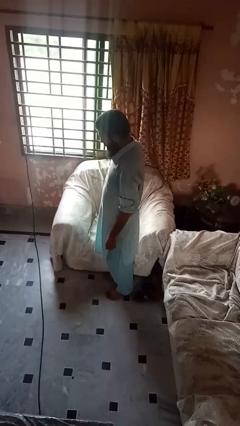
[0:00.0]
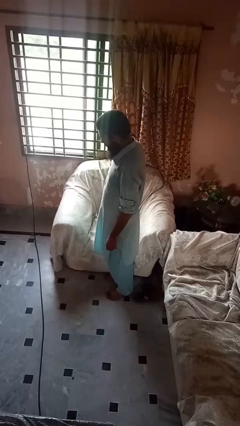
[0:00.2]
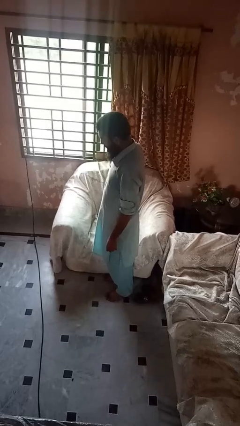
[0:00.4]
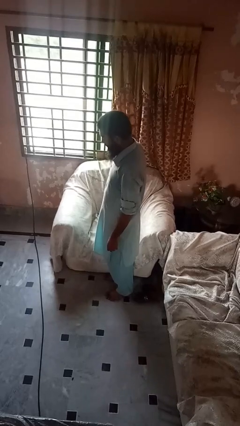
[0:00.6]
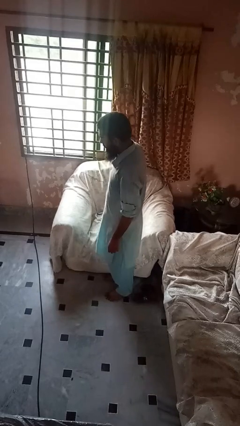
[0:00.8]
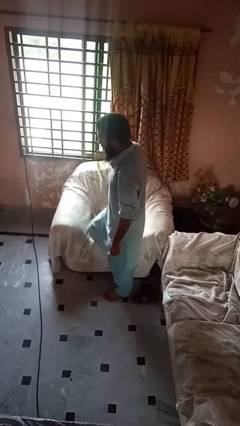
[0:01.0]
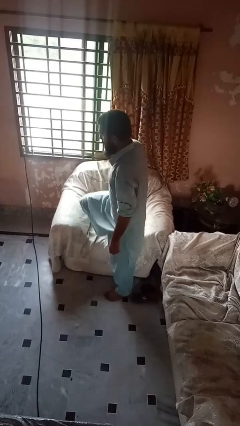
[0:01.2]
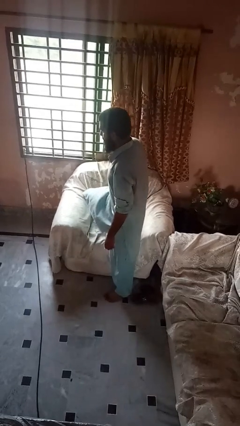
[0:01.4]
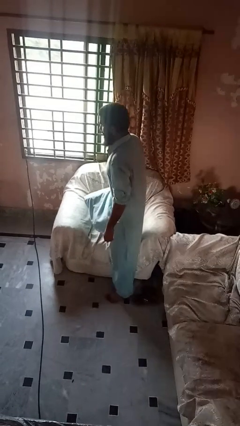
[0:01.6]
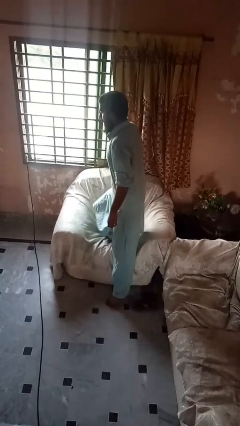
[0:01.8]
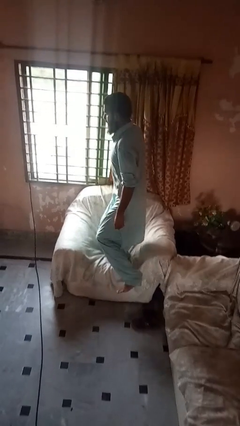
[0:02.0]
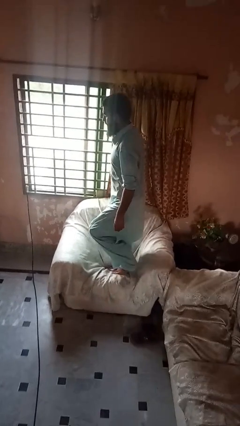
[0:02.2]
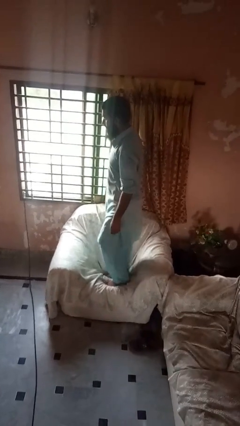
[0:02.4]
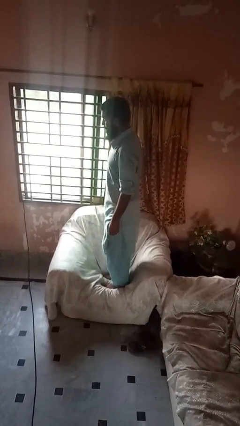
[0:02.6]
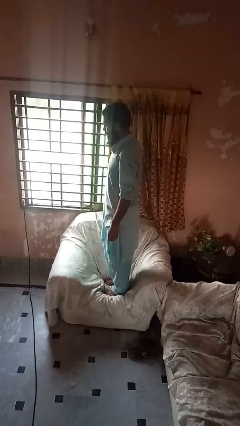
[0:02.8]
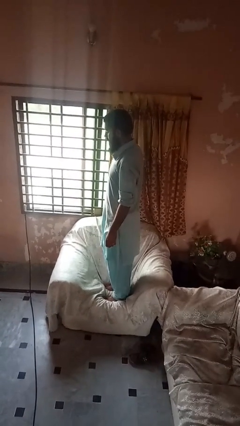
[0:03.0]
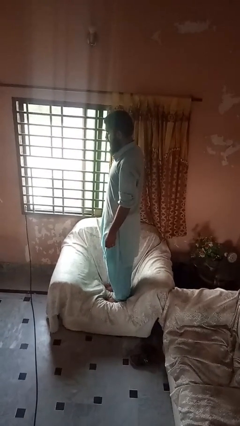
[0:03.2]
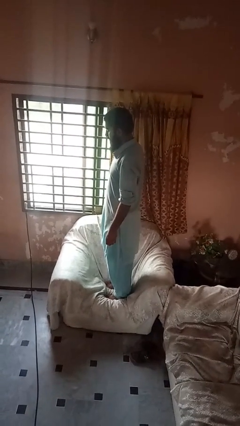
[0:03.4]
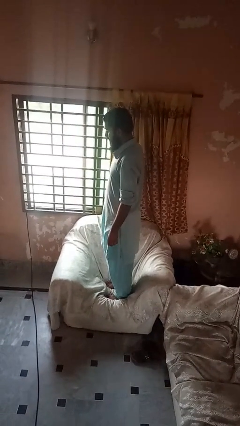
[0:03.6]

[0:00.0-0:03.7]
person climbs on couch

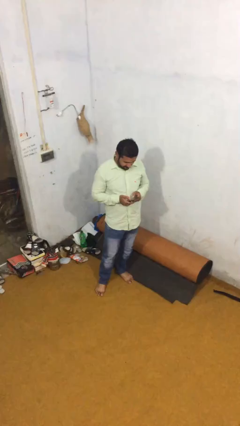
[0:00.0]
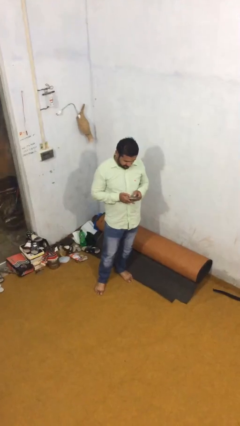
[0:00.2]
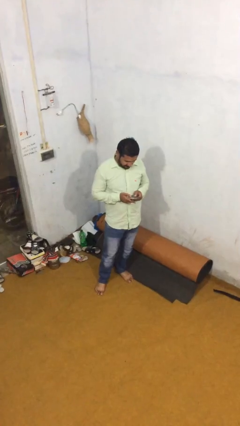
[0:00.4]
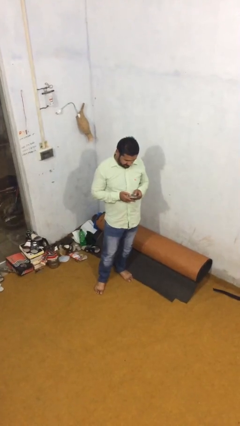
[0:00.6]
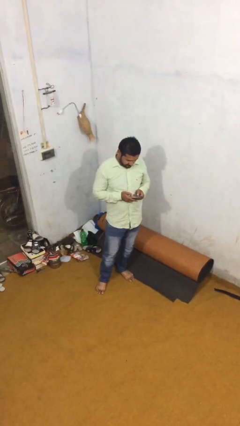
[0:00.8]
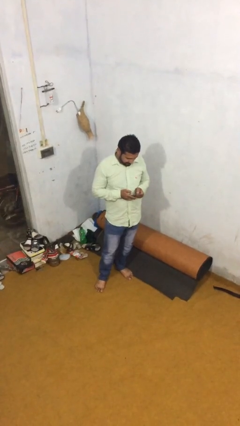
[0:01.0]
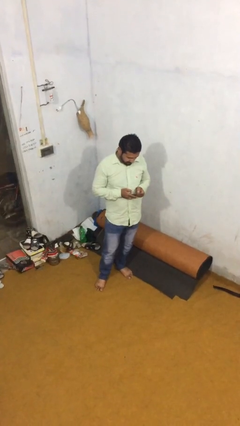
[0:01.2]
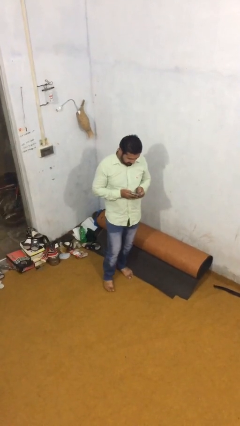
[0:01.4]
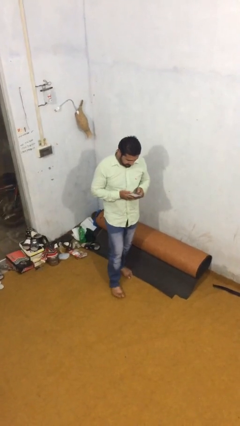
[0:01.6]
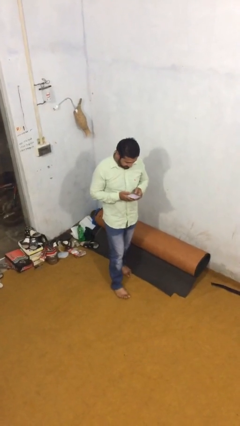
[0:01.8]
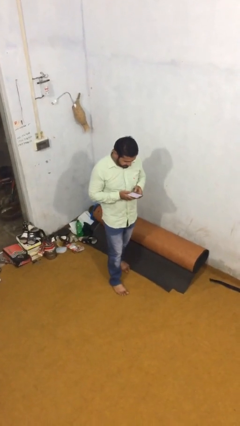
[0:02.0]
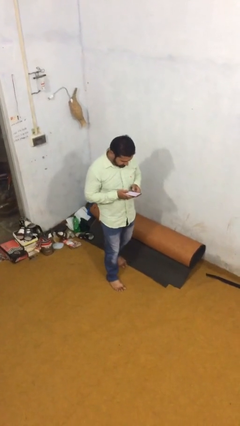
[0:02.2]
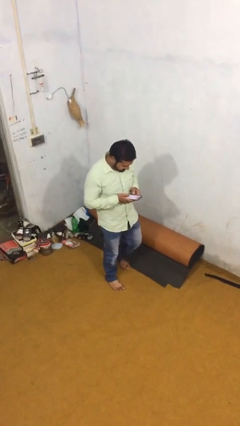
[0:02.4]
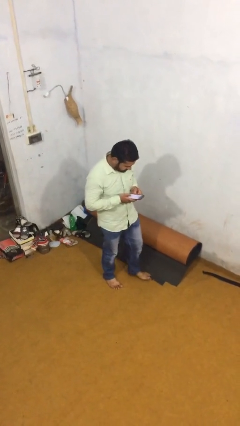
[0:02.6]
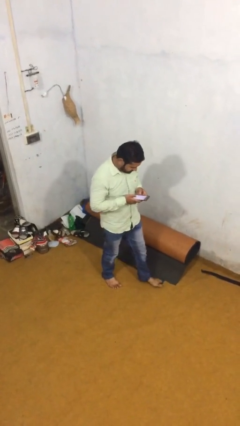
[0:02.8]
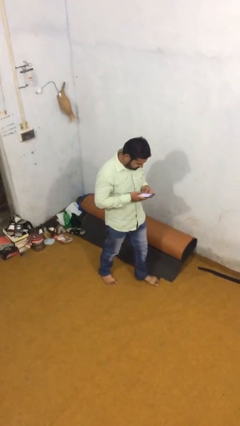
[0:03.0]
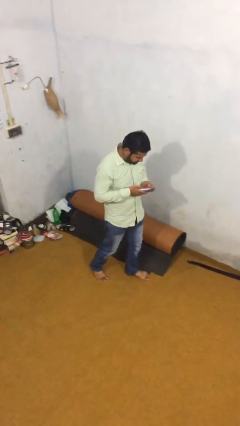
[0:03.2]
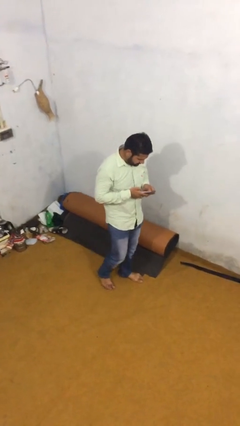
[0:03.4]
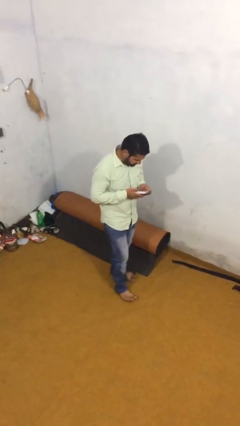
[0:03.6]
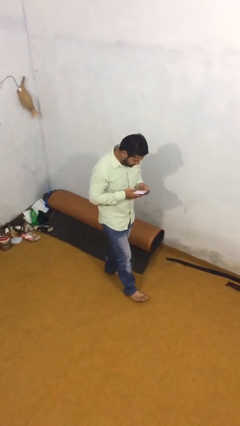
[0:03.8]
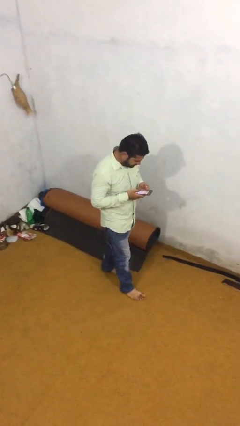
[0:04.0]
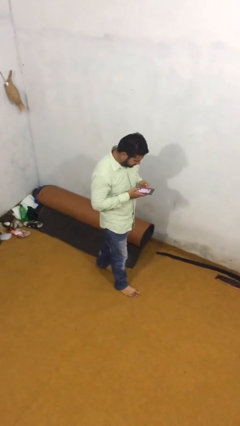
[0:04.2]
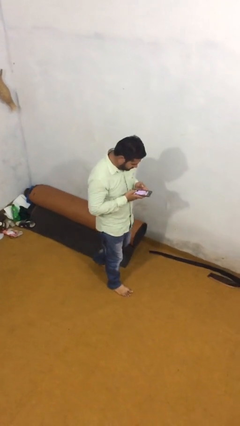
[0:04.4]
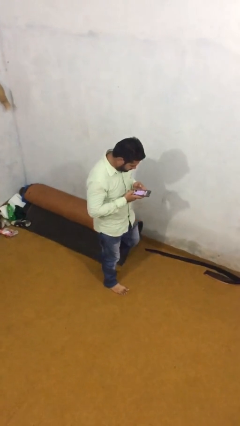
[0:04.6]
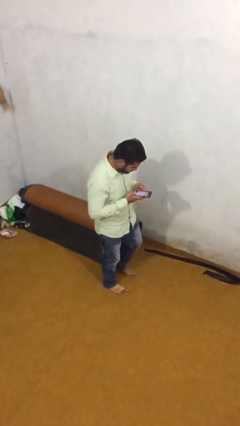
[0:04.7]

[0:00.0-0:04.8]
person texts on phone

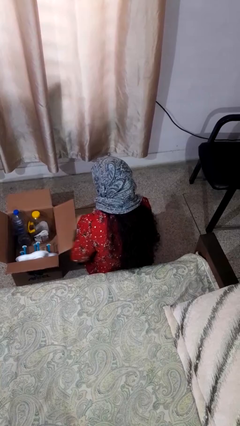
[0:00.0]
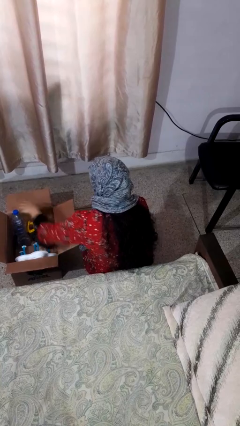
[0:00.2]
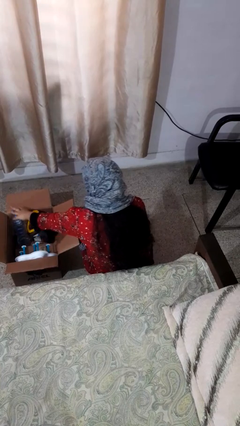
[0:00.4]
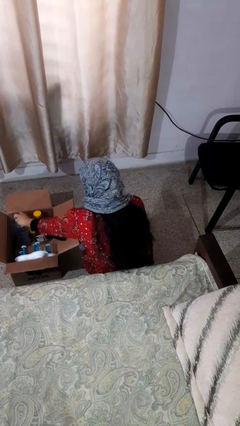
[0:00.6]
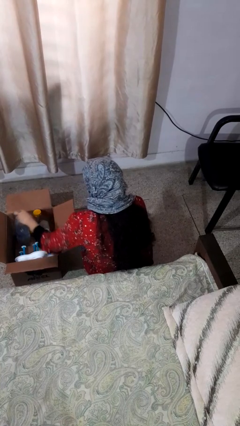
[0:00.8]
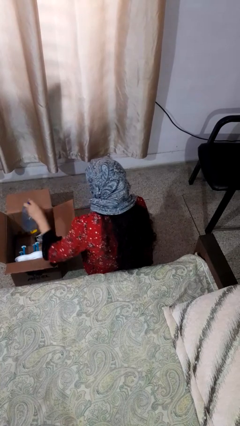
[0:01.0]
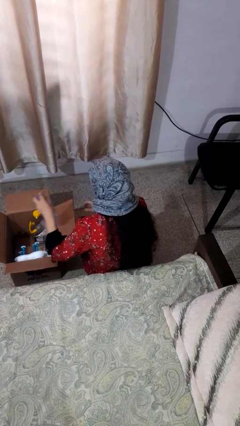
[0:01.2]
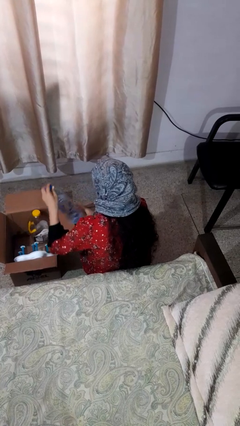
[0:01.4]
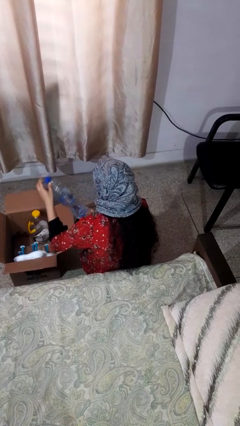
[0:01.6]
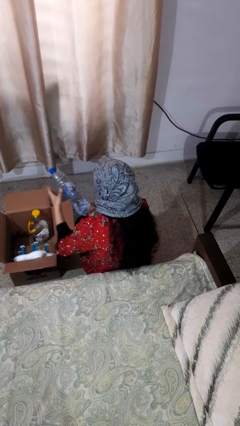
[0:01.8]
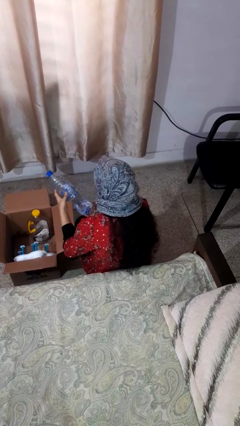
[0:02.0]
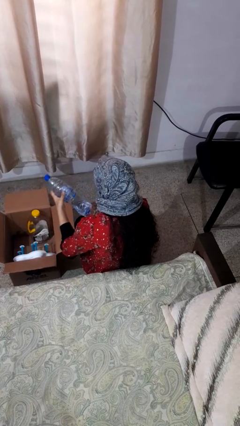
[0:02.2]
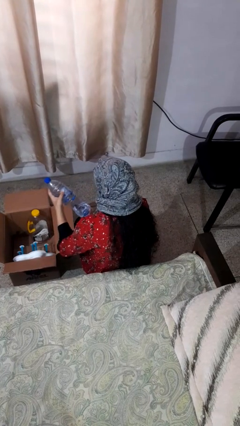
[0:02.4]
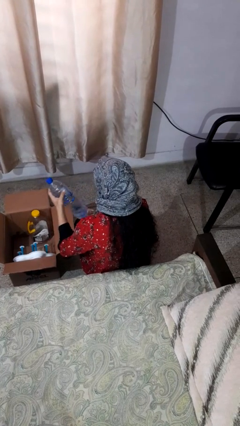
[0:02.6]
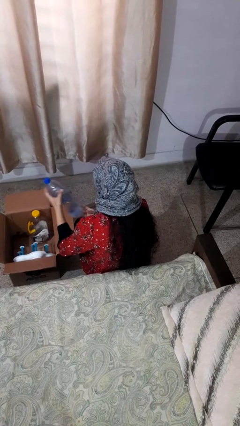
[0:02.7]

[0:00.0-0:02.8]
person takes object from box

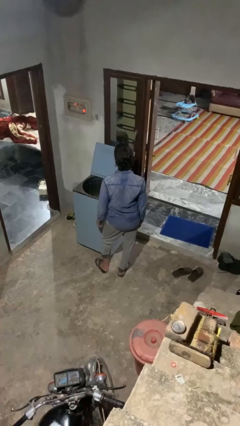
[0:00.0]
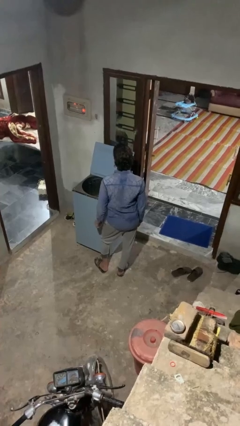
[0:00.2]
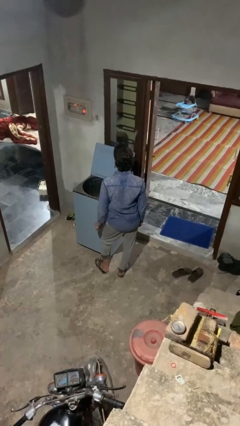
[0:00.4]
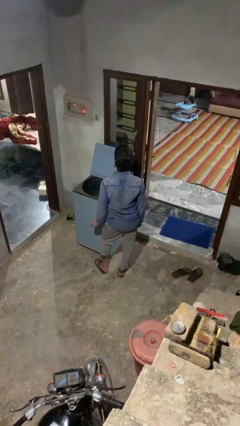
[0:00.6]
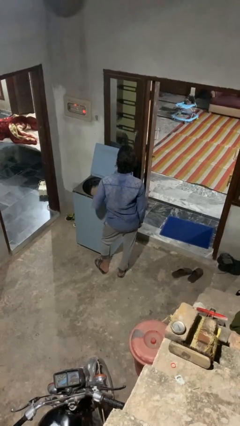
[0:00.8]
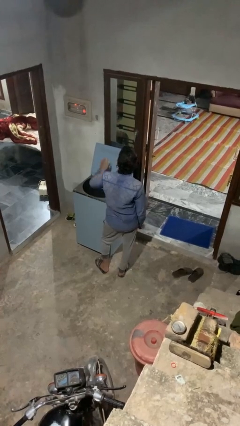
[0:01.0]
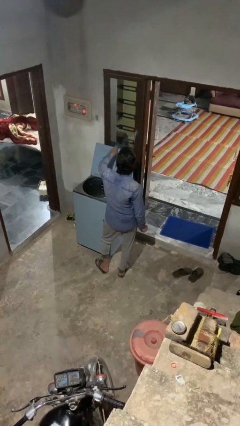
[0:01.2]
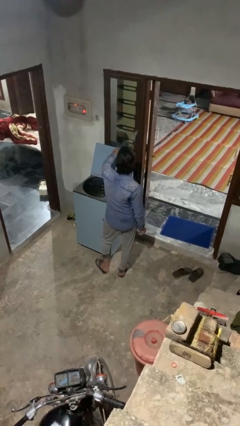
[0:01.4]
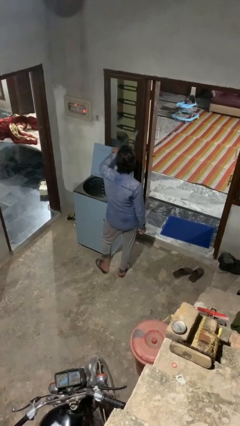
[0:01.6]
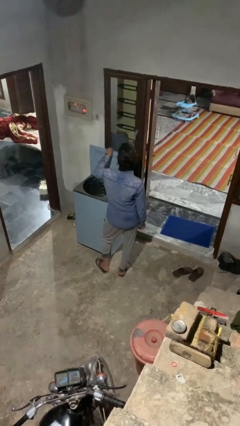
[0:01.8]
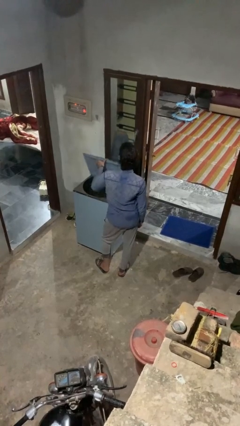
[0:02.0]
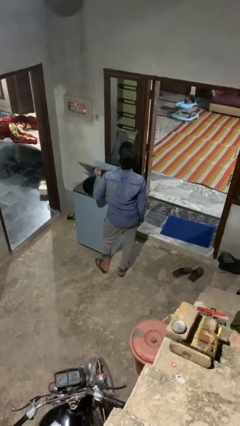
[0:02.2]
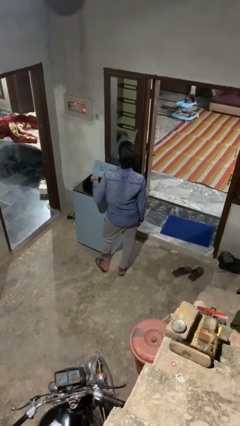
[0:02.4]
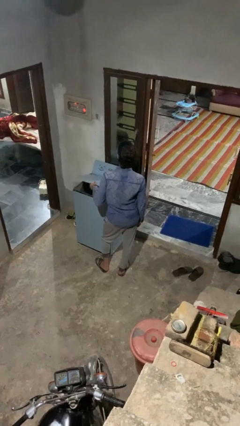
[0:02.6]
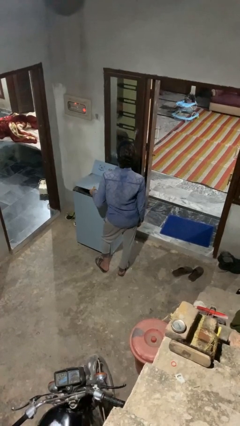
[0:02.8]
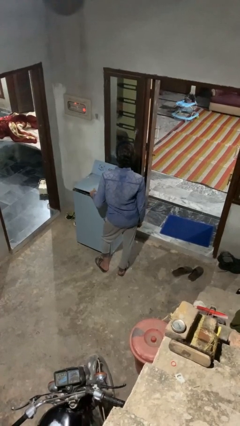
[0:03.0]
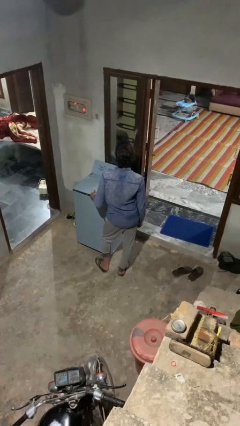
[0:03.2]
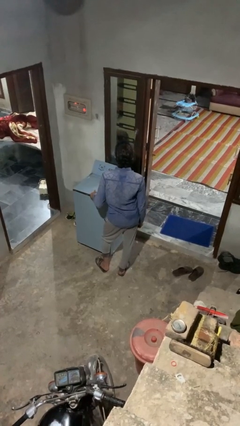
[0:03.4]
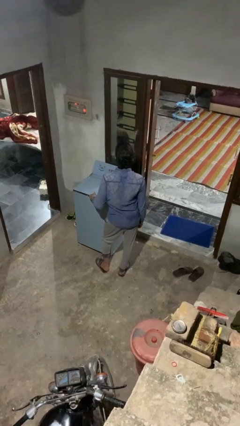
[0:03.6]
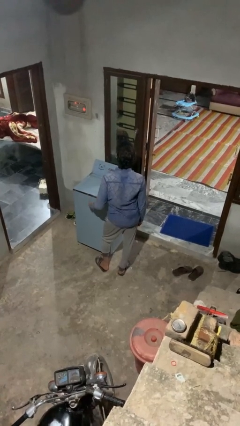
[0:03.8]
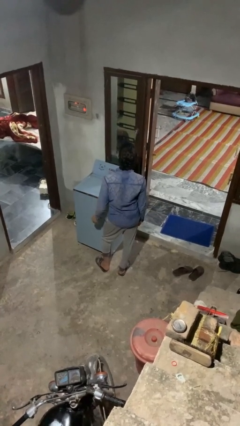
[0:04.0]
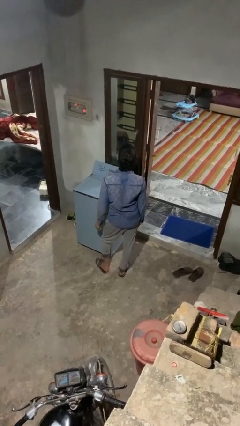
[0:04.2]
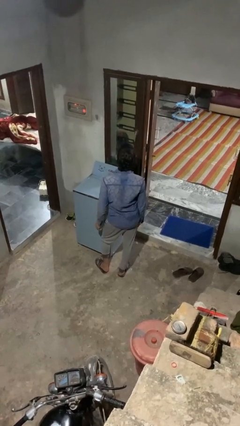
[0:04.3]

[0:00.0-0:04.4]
person closes clothes washer

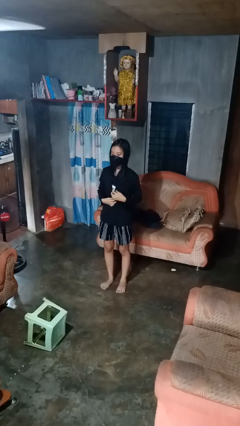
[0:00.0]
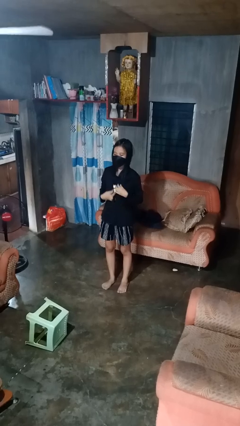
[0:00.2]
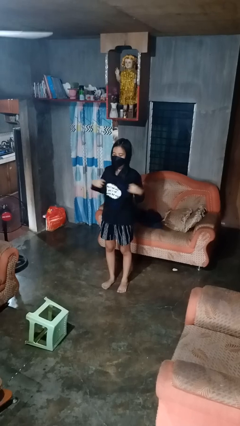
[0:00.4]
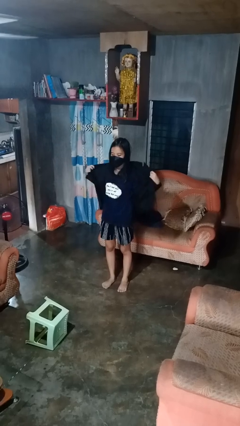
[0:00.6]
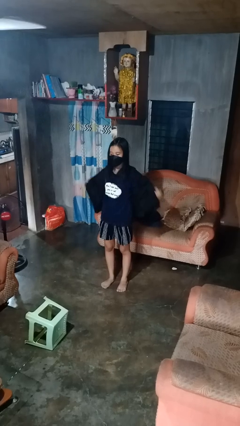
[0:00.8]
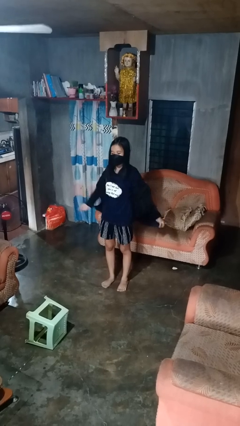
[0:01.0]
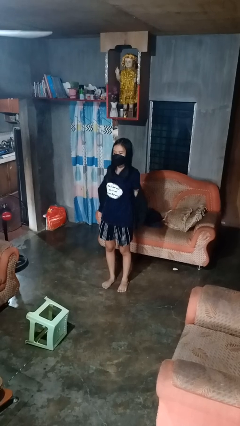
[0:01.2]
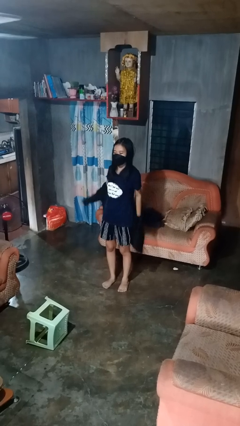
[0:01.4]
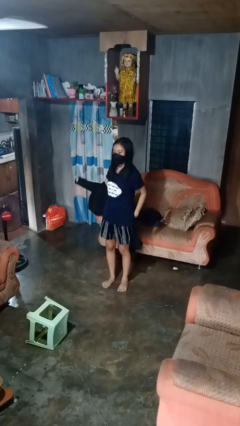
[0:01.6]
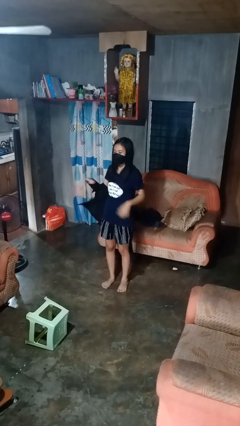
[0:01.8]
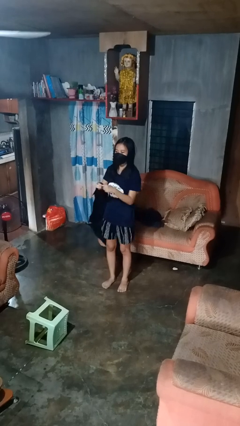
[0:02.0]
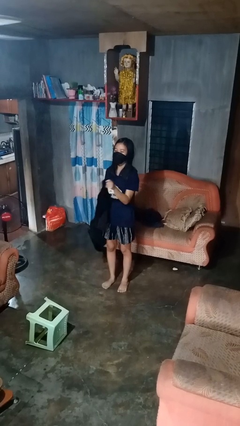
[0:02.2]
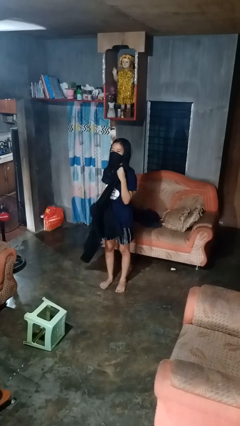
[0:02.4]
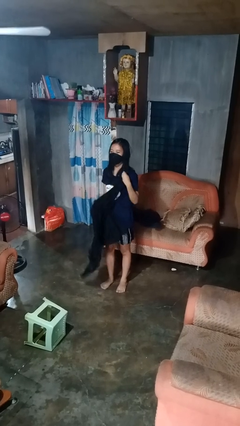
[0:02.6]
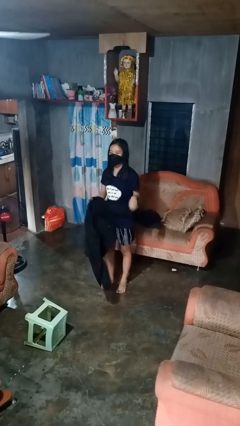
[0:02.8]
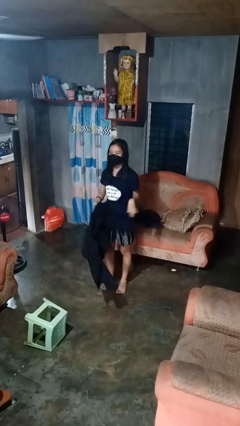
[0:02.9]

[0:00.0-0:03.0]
person takes off shirt
